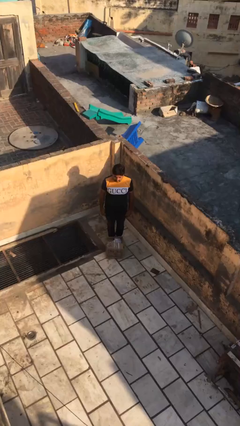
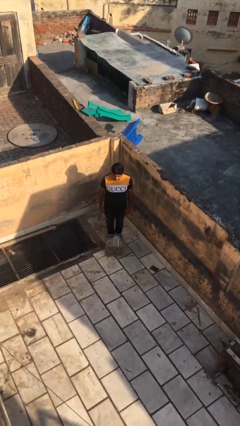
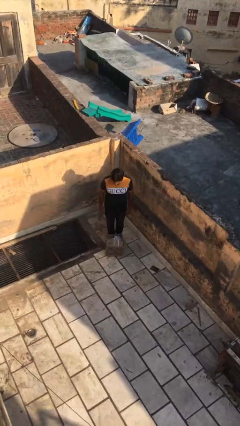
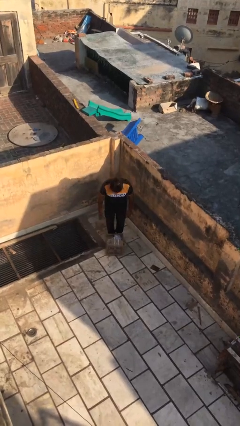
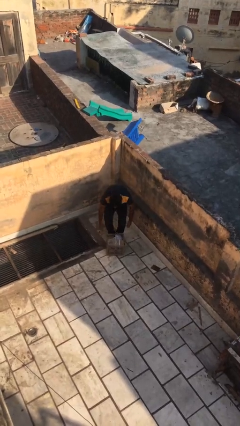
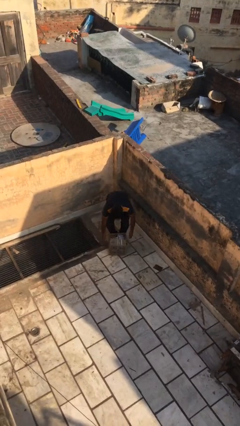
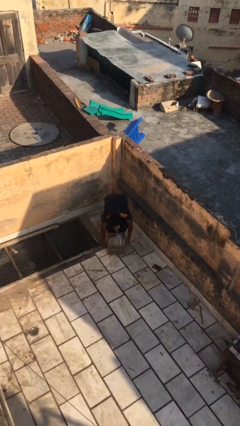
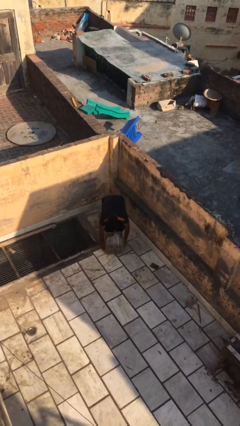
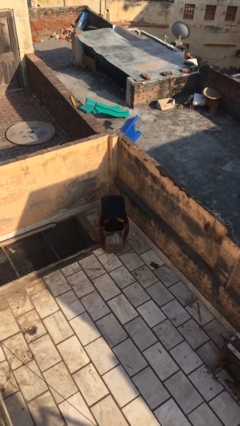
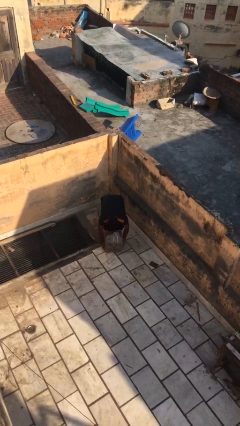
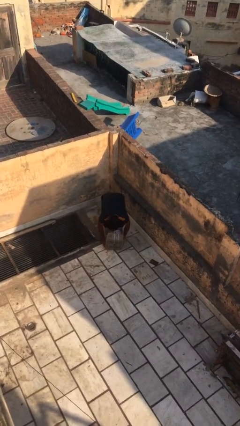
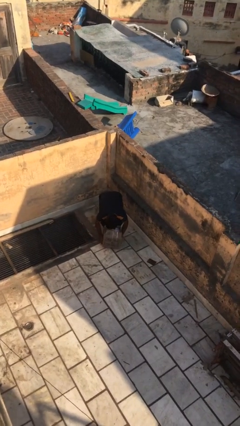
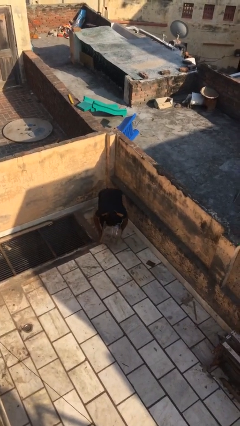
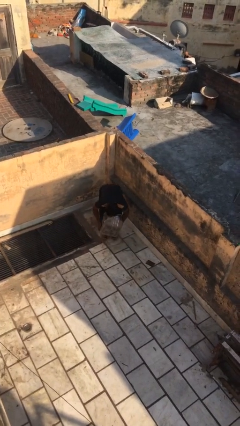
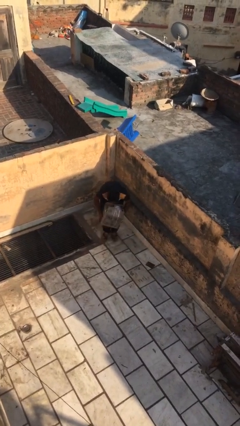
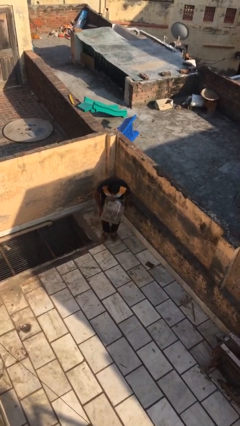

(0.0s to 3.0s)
person picks up object from floor

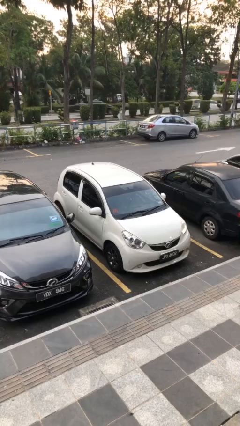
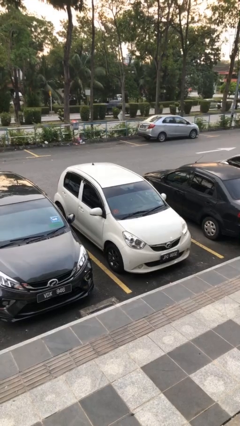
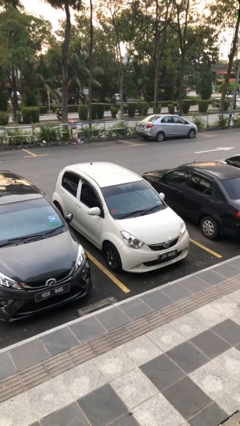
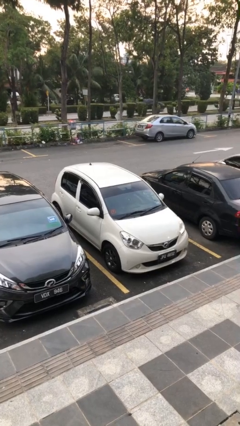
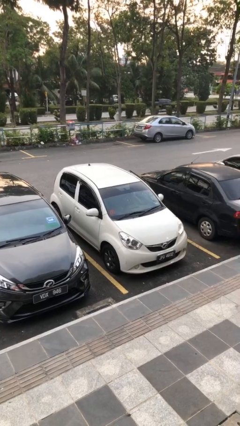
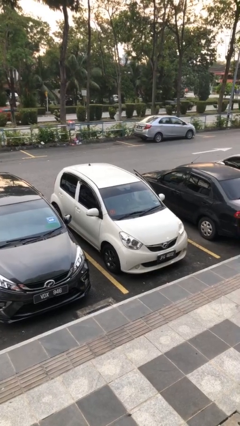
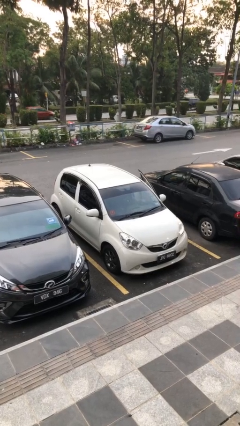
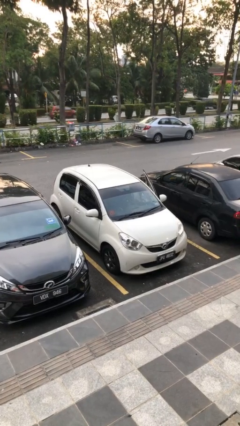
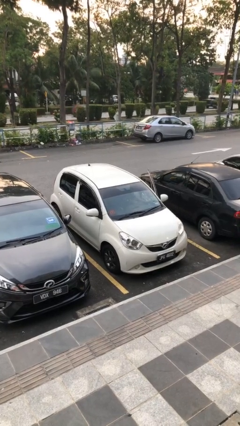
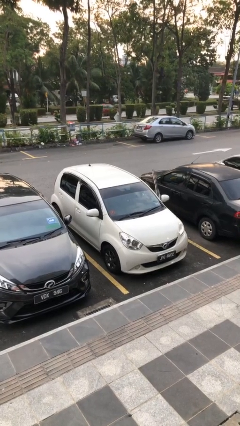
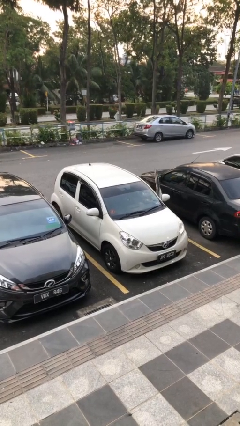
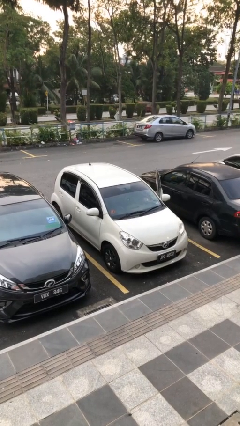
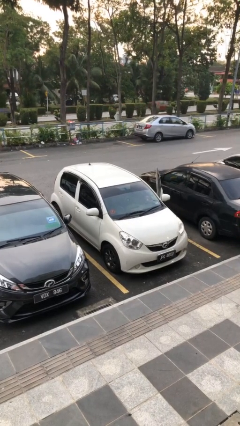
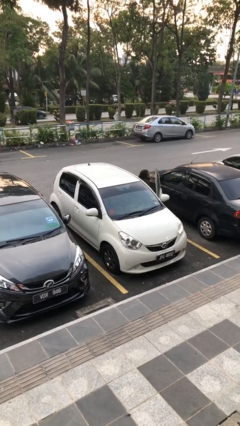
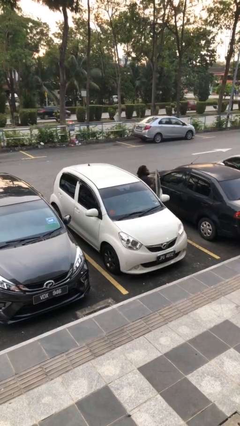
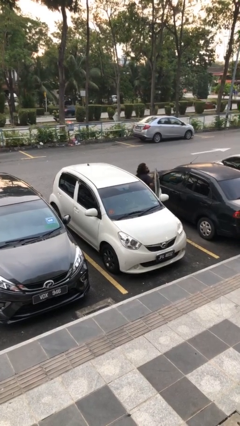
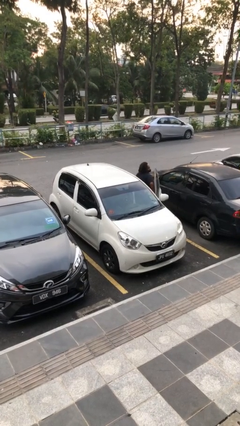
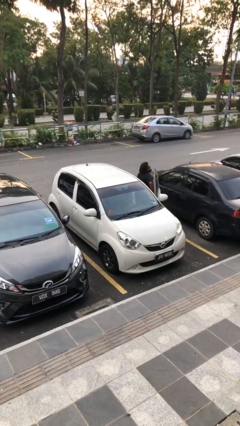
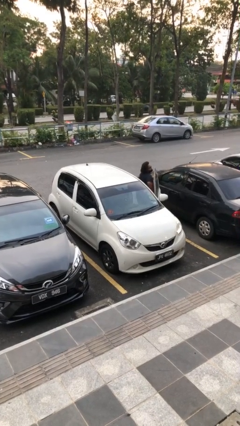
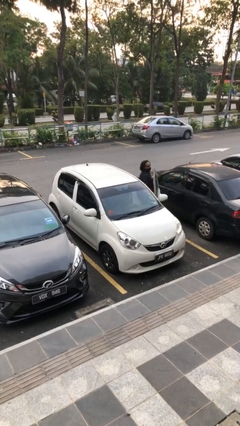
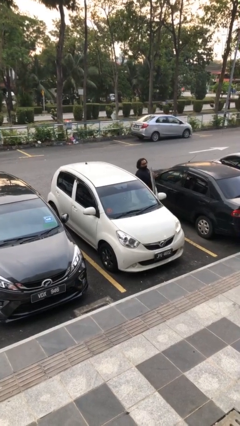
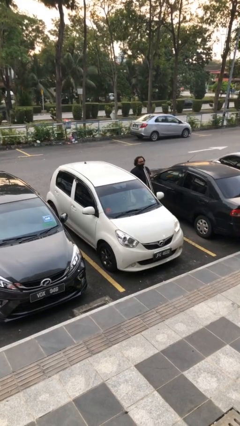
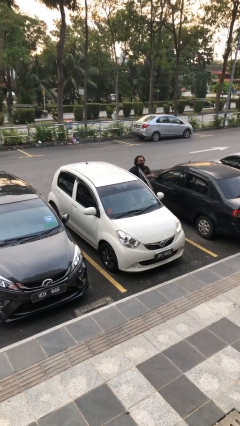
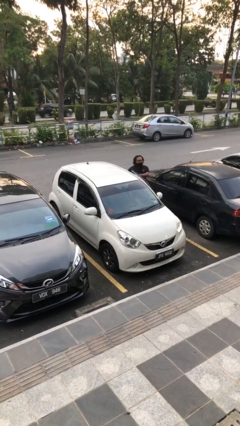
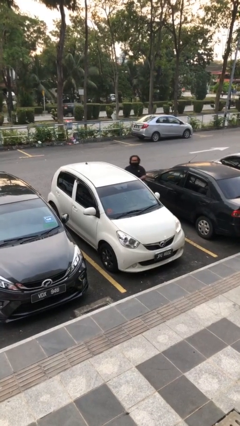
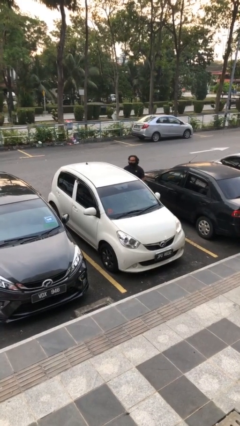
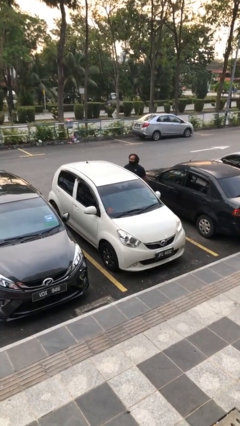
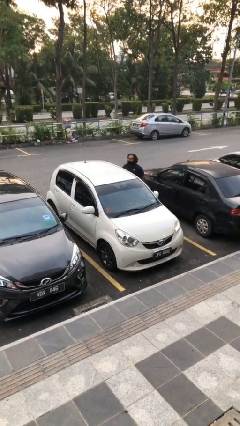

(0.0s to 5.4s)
car drops off person

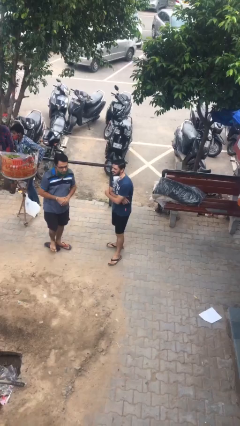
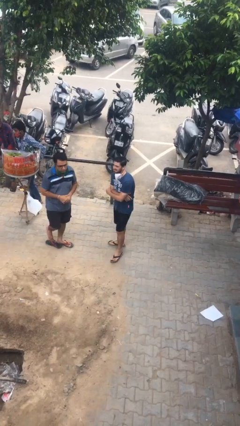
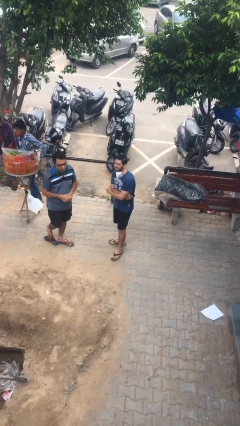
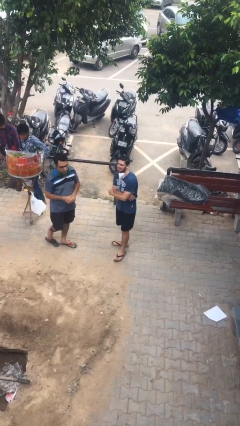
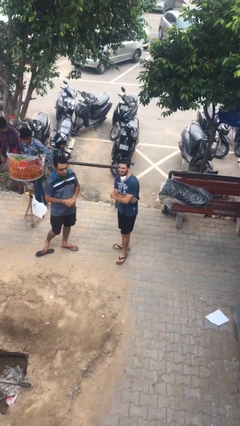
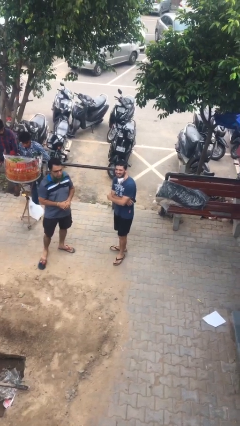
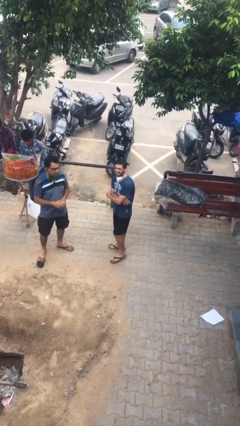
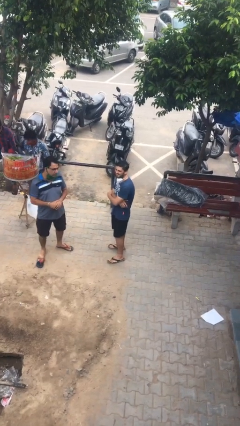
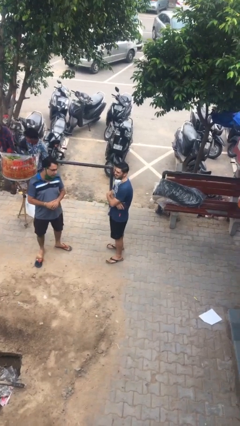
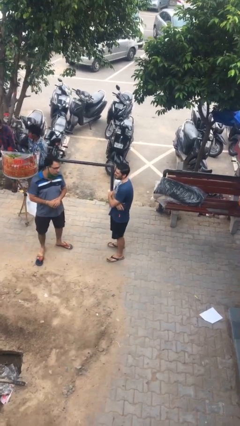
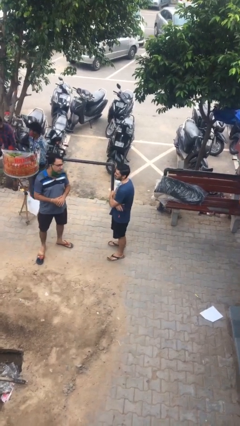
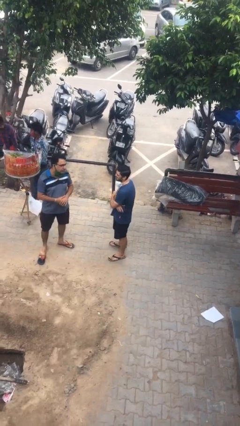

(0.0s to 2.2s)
person laughs with person

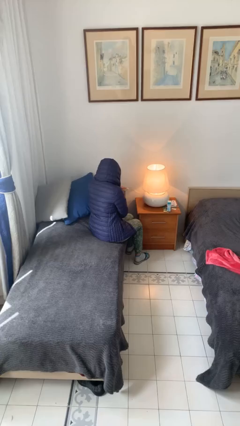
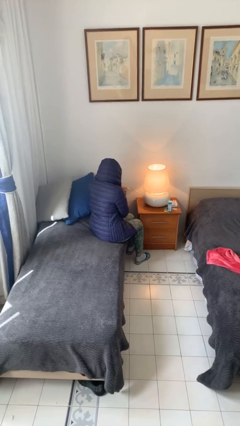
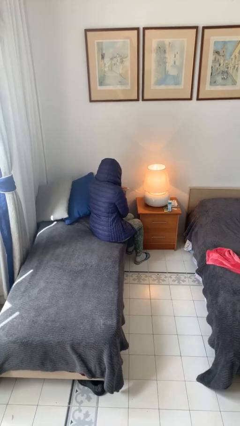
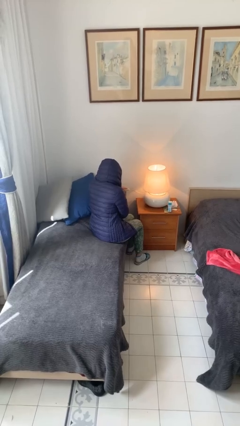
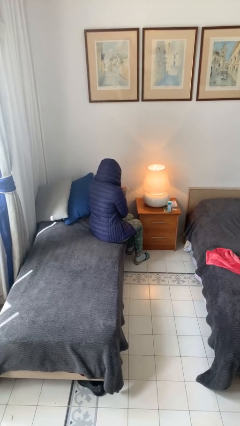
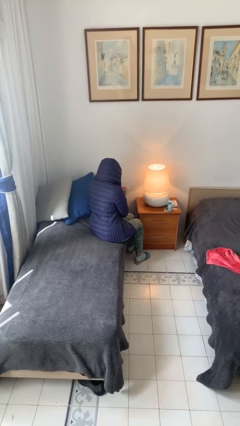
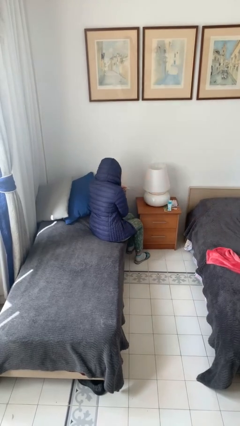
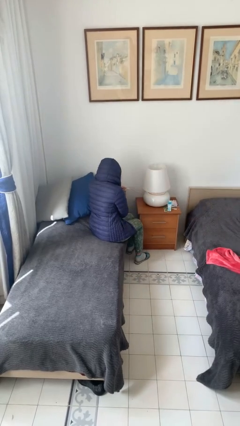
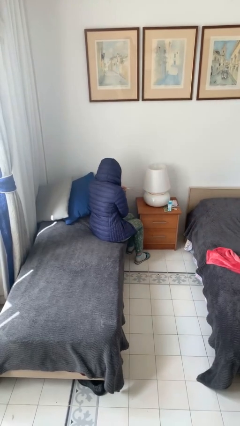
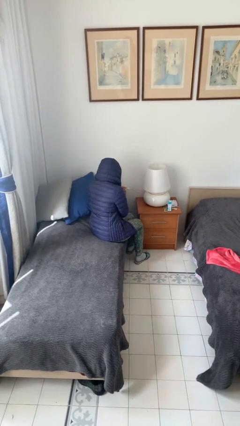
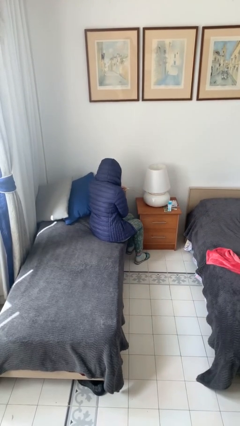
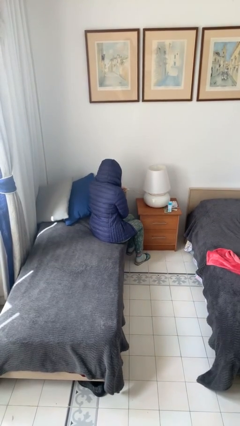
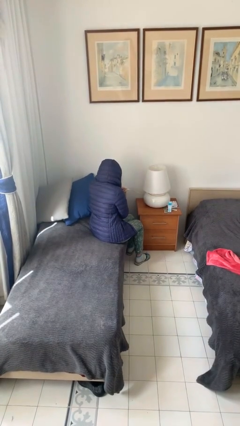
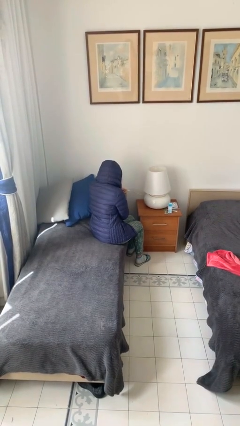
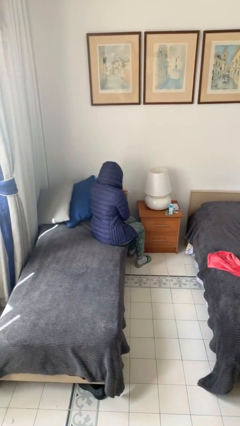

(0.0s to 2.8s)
person turns off lamp

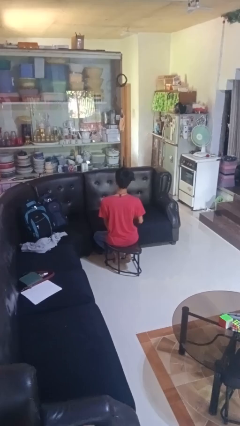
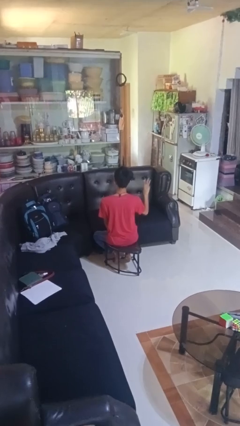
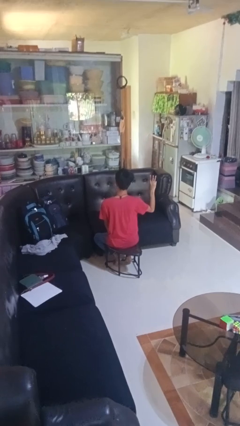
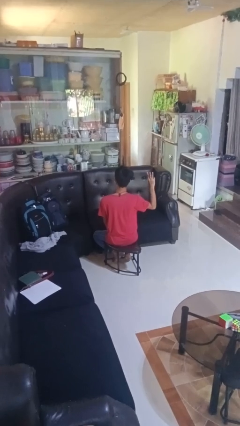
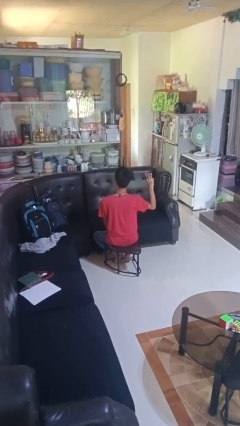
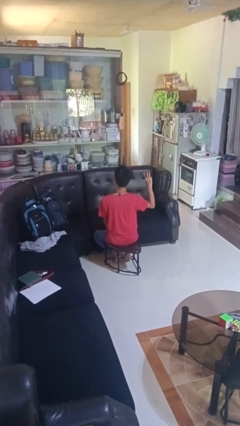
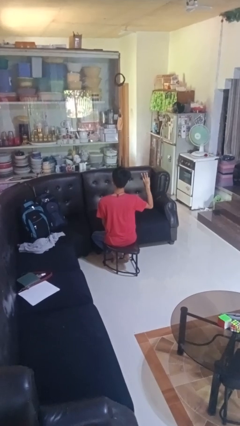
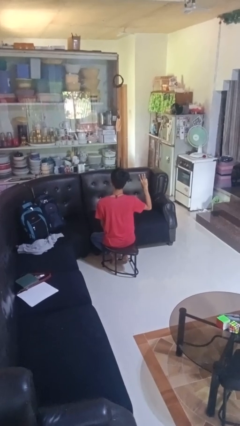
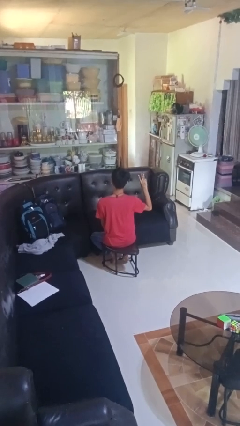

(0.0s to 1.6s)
person gestures number three

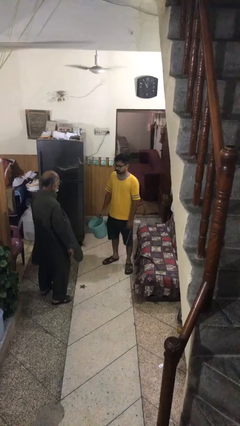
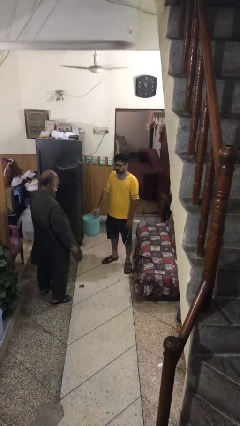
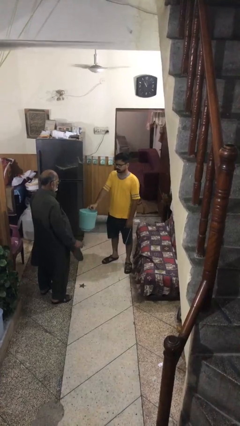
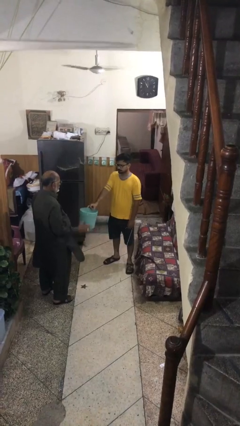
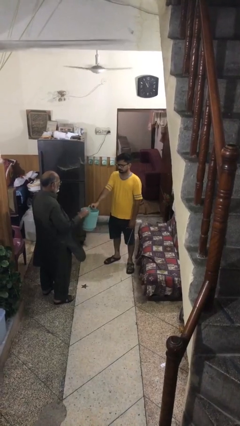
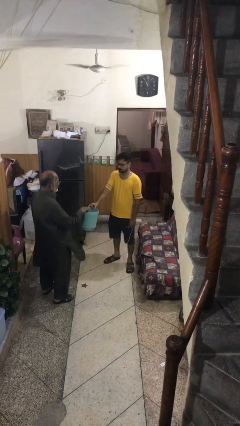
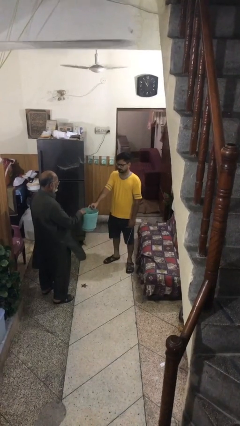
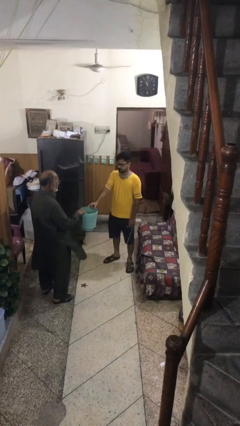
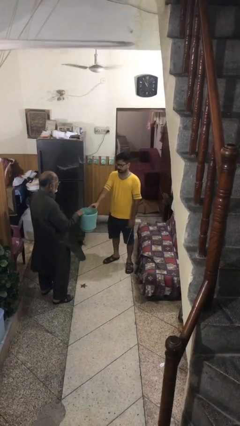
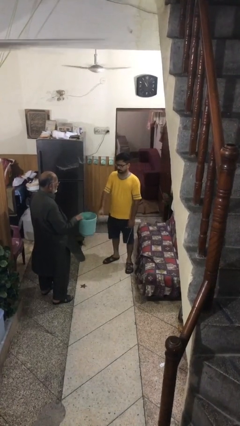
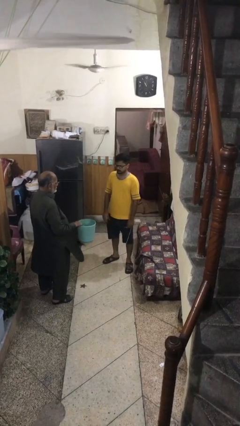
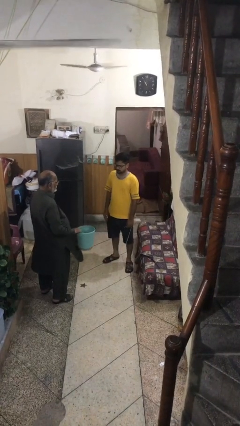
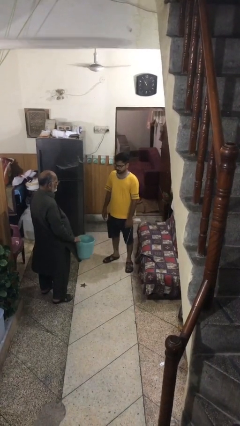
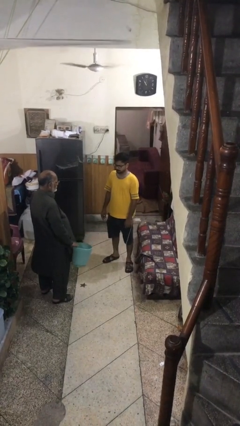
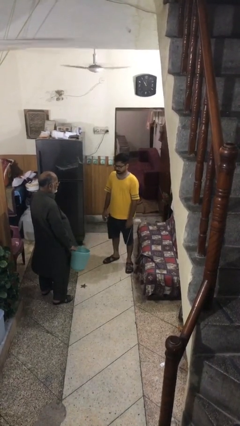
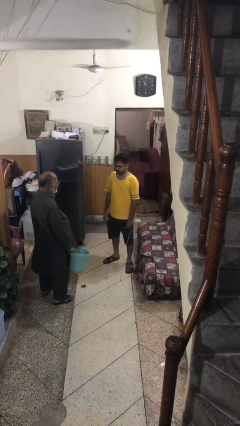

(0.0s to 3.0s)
person transfers object to person
